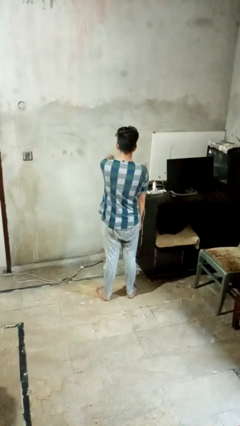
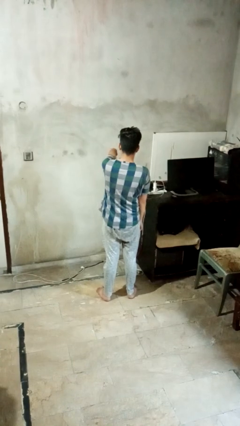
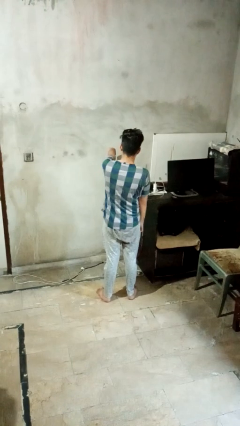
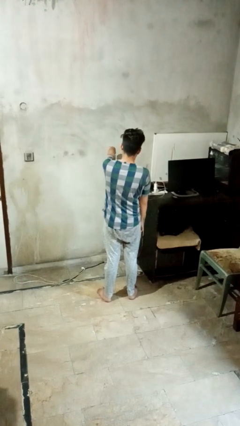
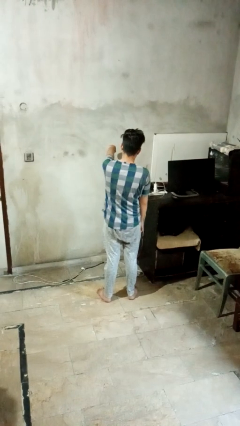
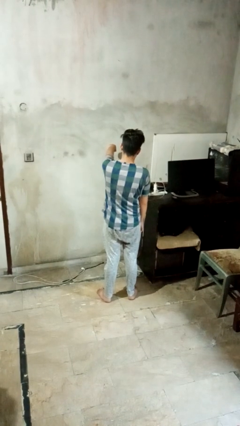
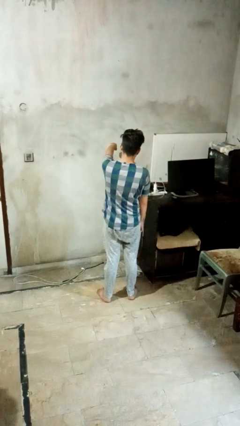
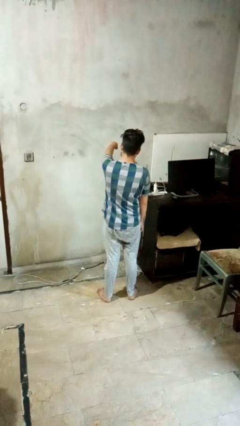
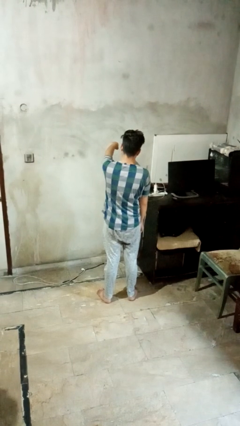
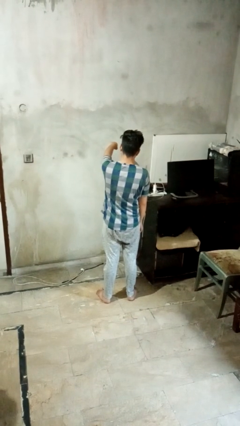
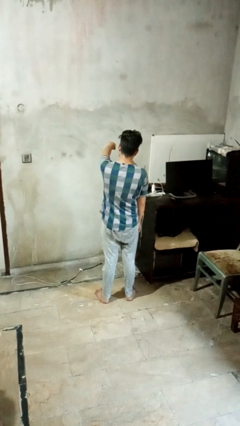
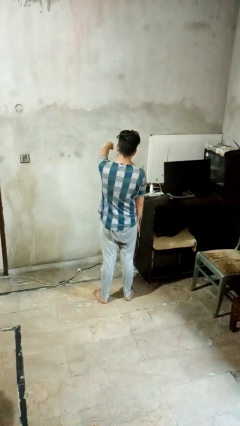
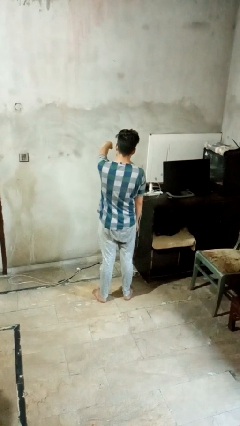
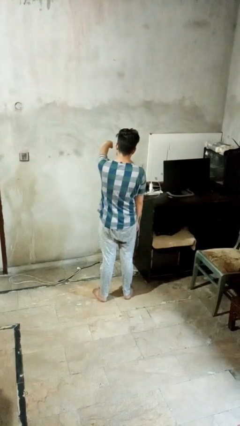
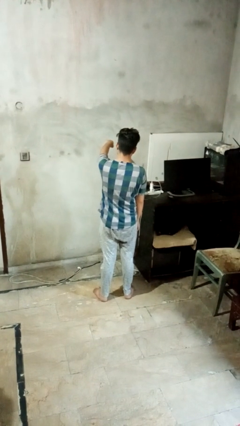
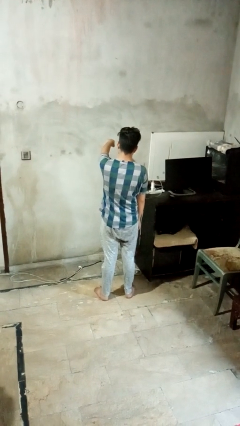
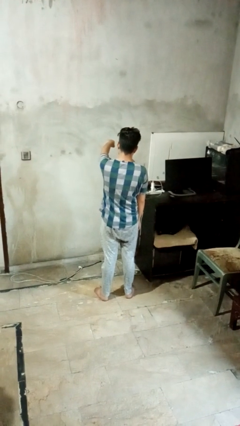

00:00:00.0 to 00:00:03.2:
person punches

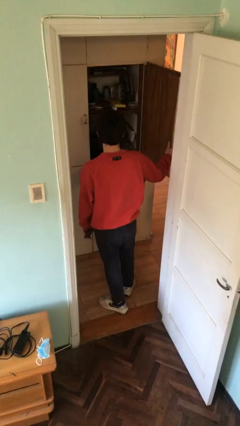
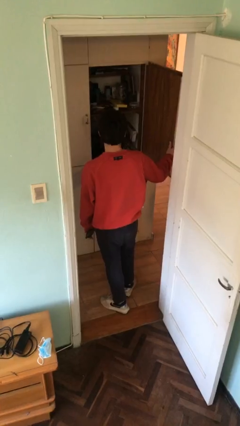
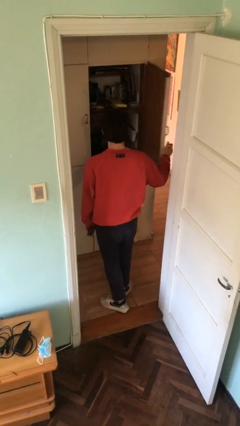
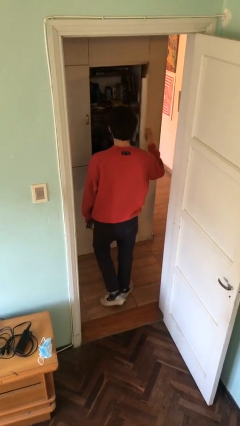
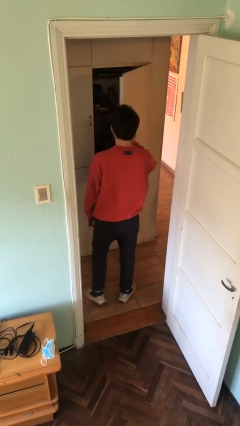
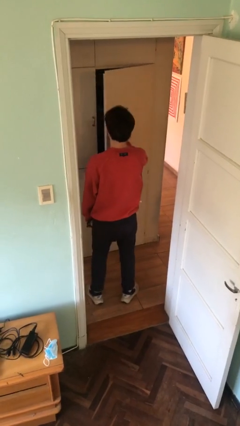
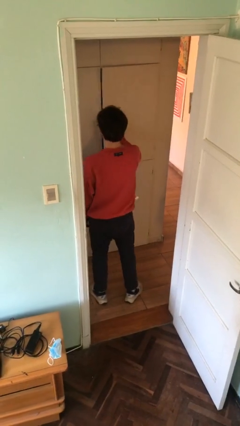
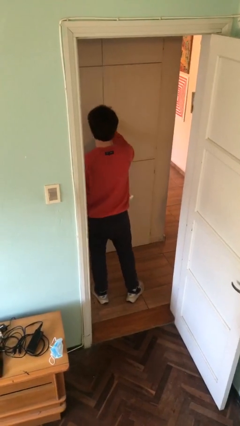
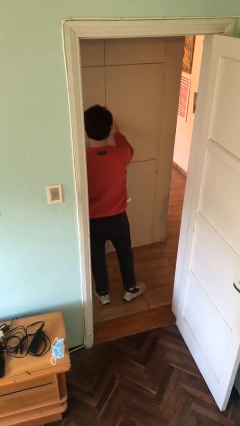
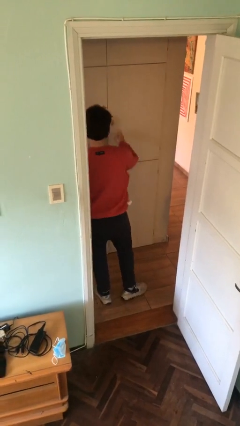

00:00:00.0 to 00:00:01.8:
person closes closet door

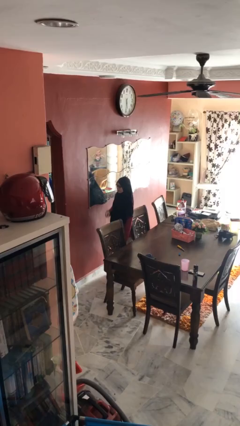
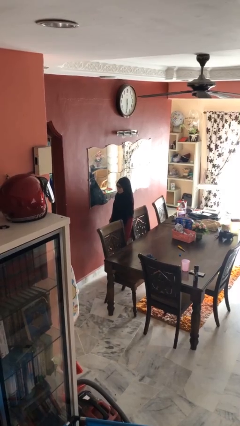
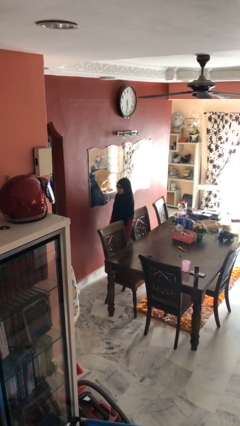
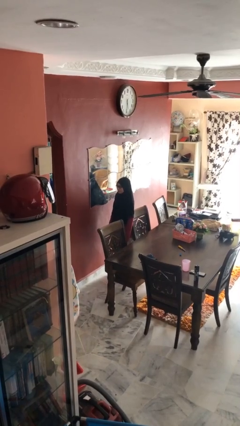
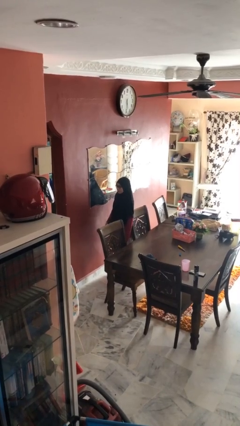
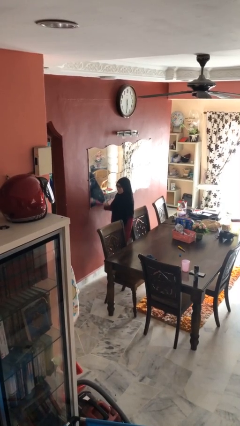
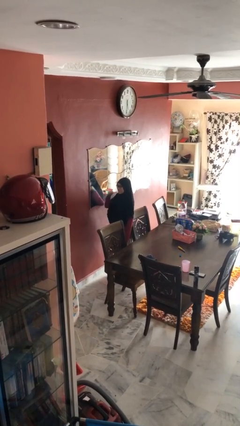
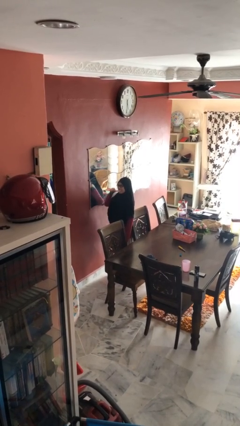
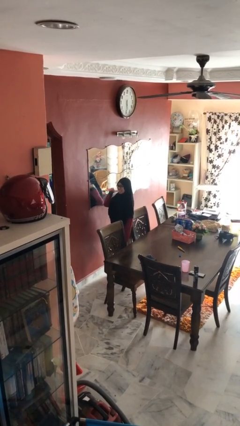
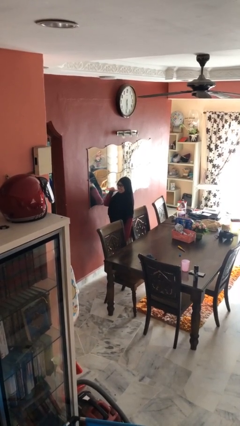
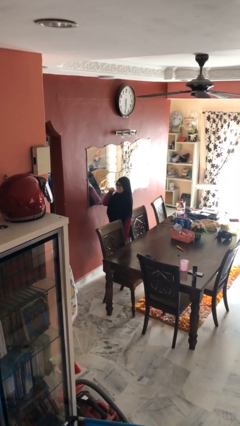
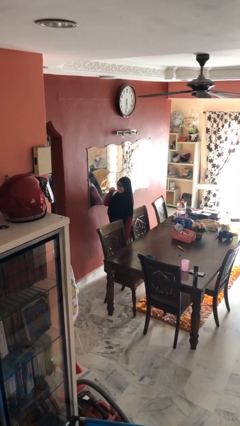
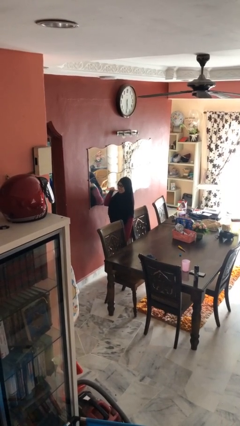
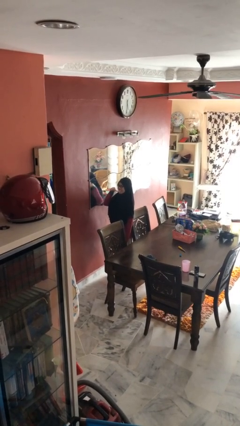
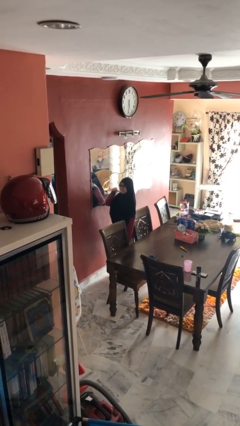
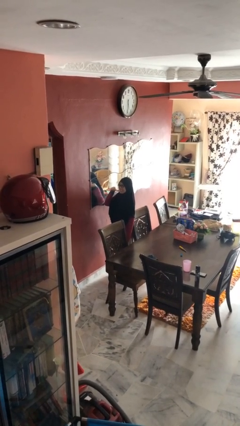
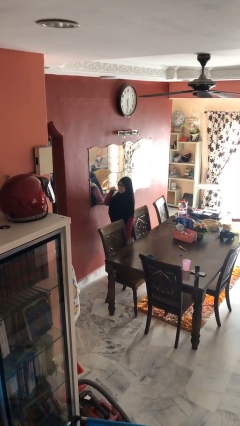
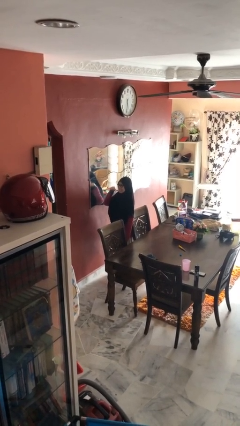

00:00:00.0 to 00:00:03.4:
person brushes teeth

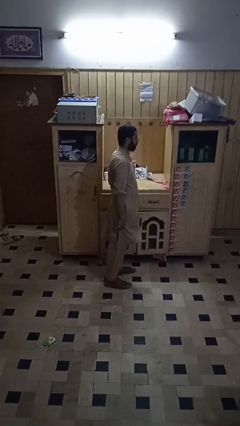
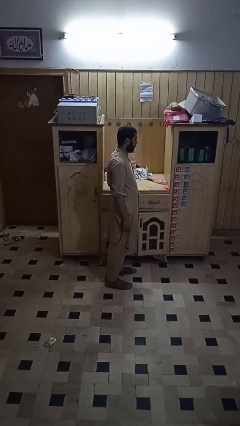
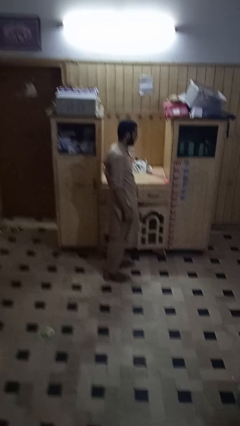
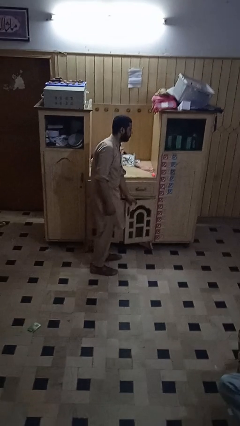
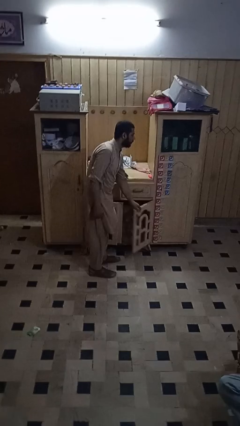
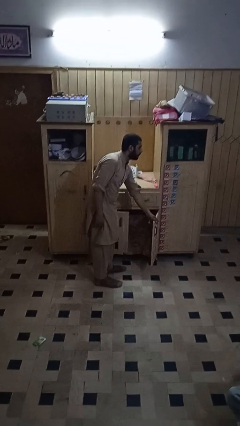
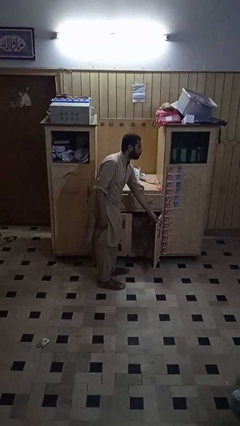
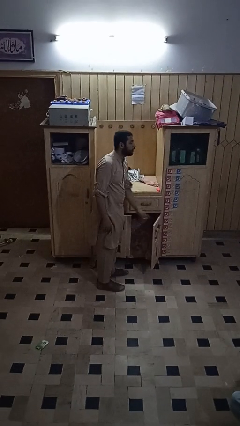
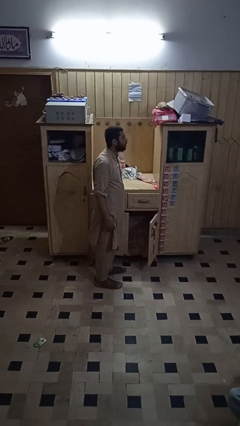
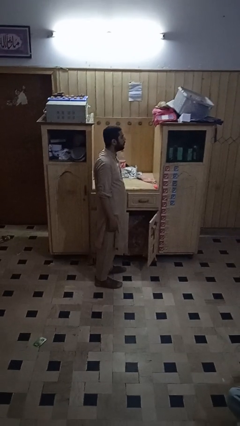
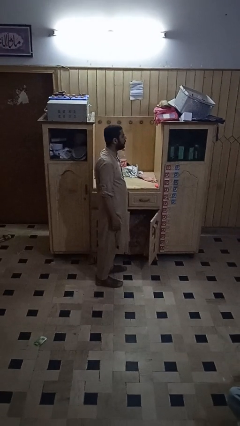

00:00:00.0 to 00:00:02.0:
person closes cabinet

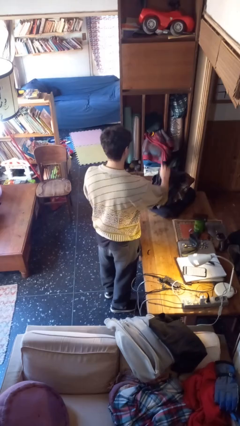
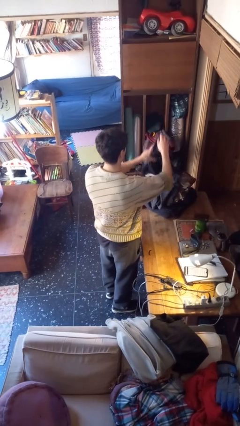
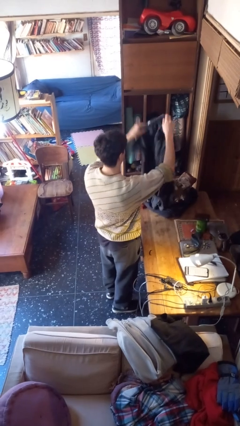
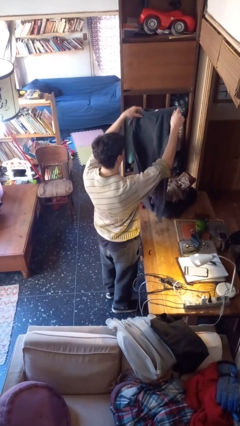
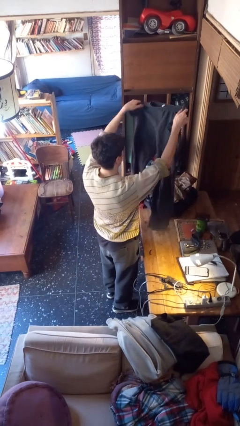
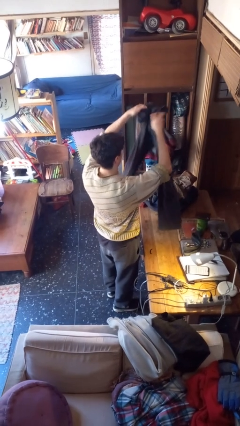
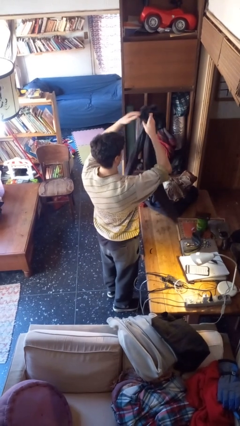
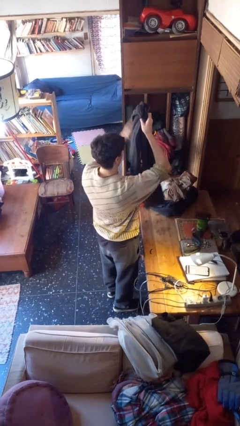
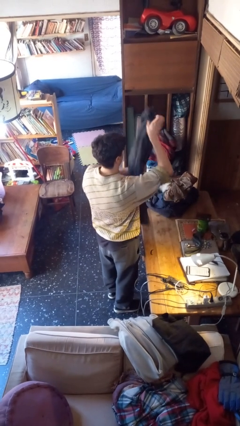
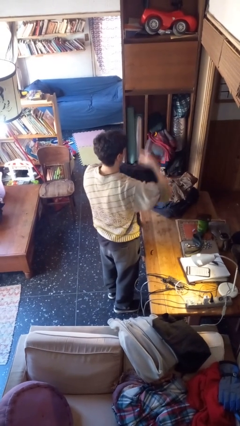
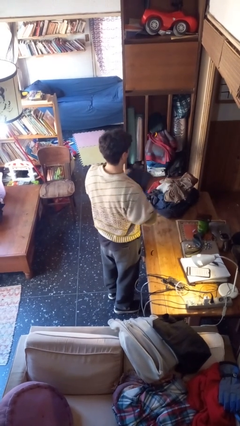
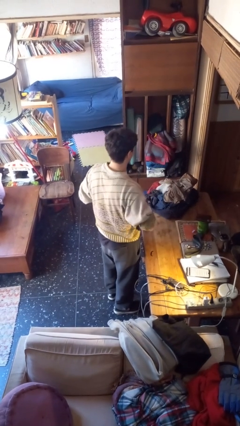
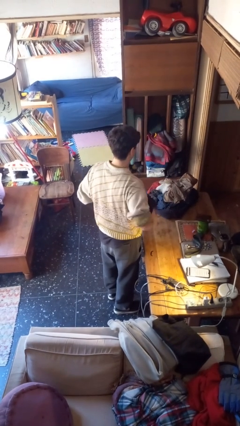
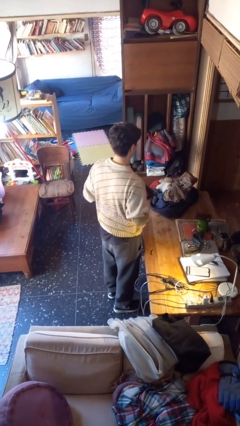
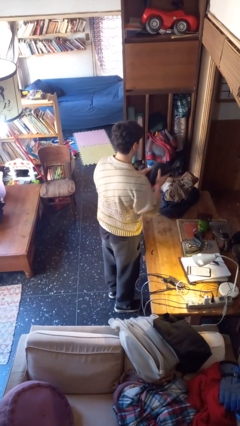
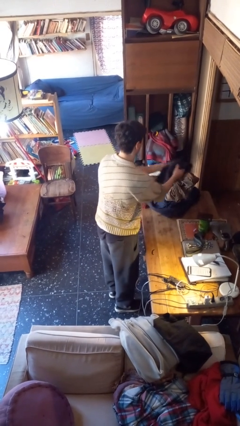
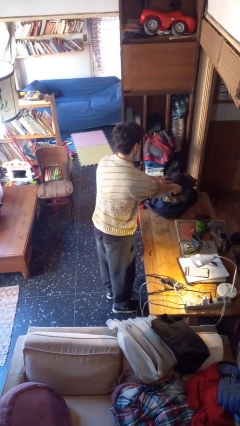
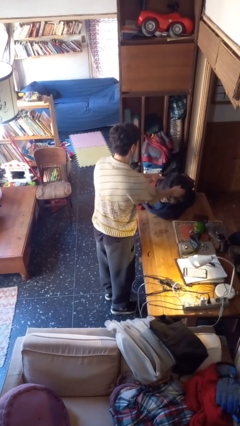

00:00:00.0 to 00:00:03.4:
person folds pants

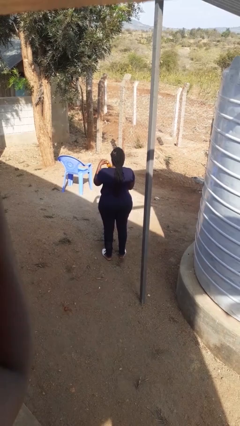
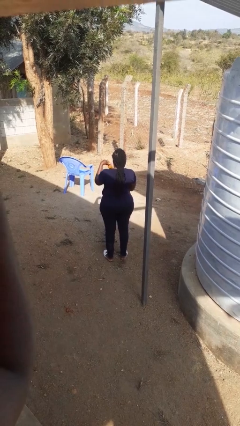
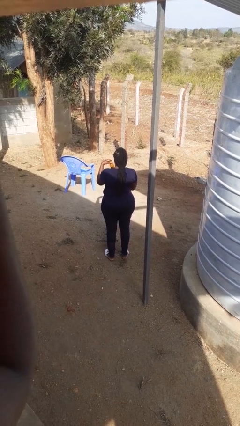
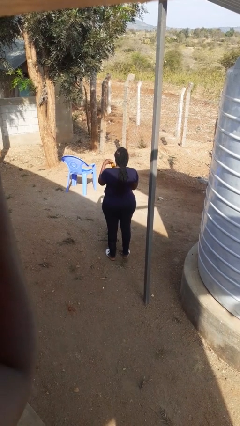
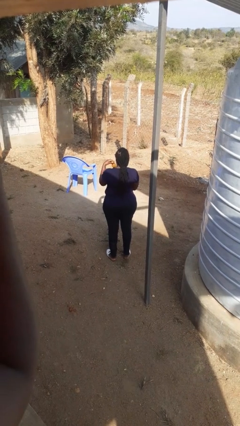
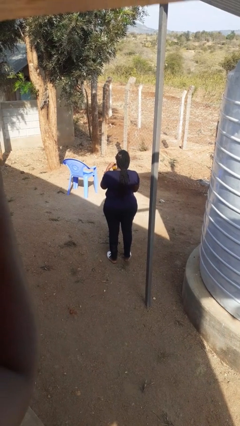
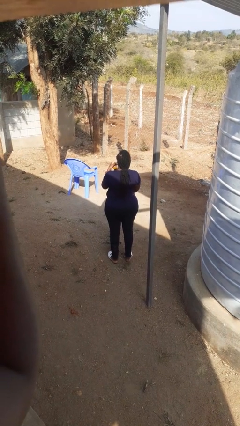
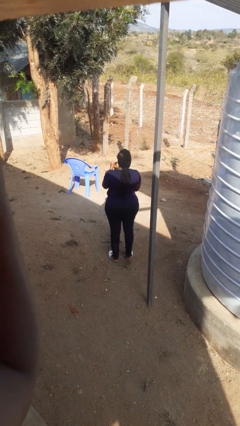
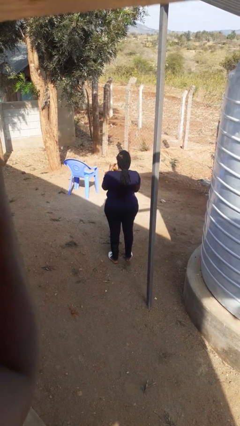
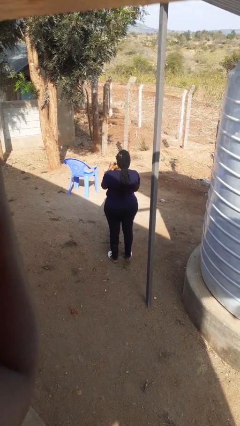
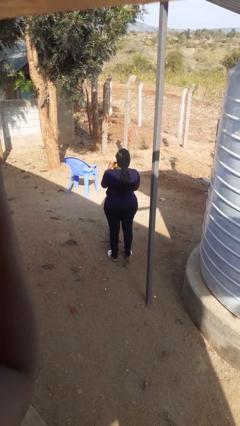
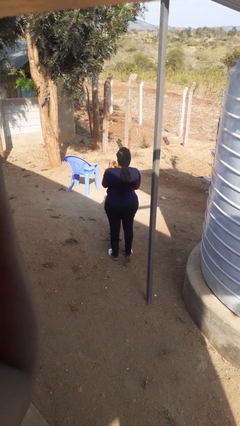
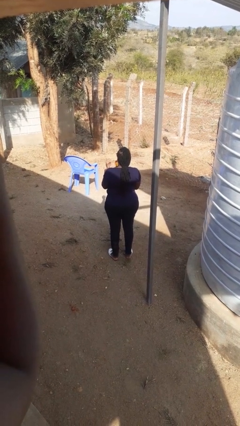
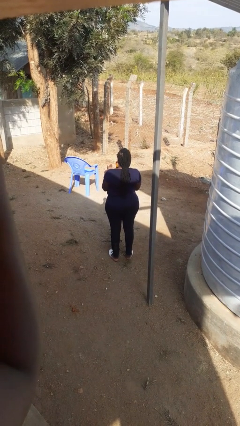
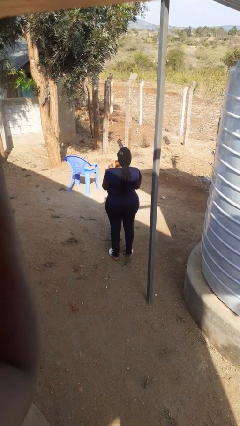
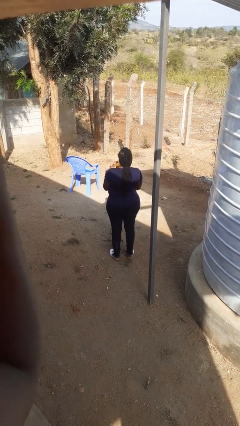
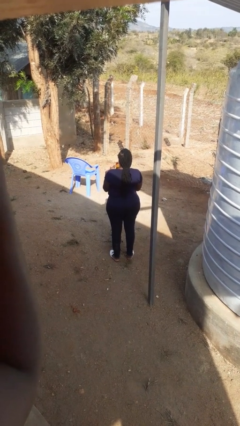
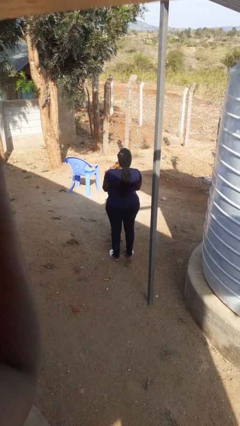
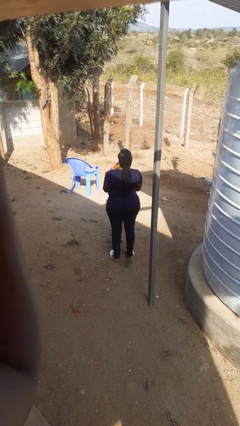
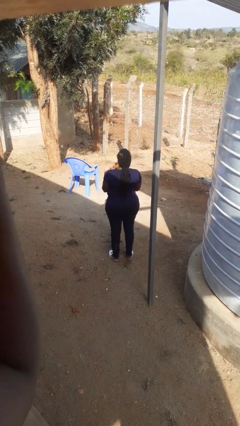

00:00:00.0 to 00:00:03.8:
person closes jar
